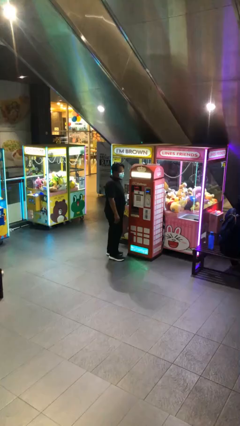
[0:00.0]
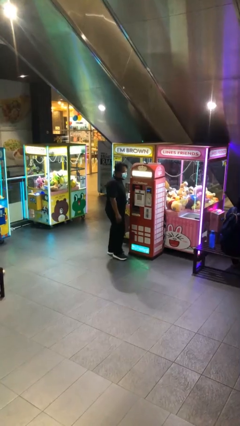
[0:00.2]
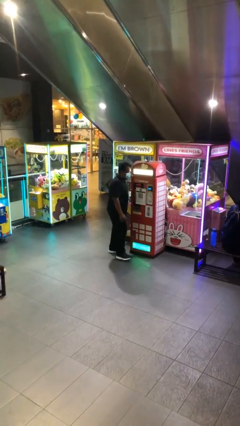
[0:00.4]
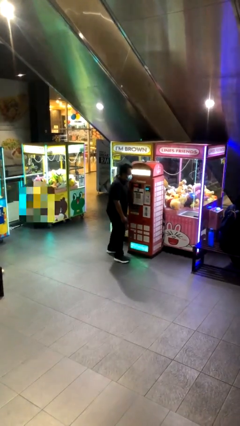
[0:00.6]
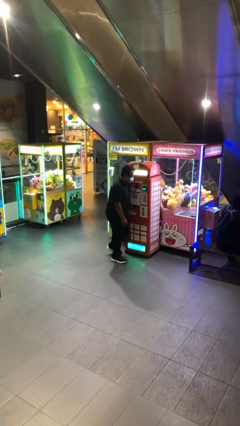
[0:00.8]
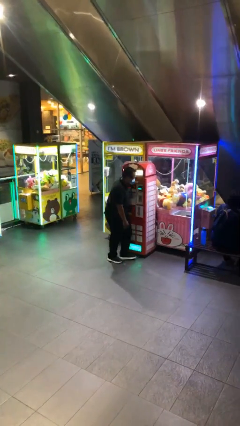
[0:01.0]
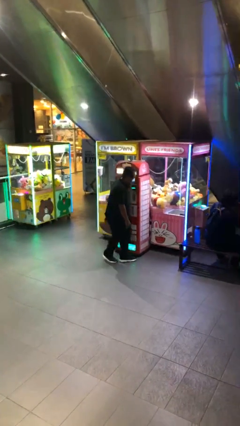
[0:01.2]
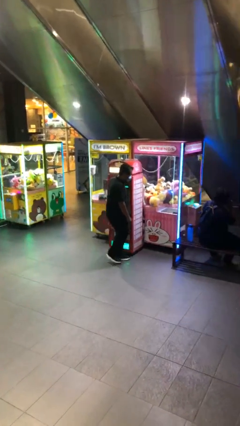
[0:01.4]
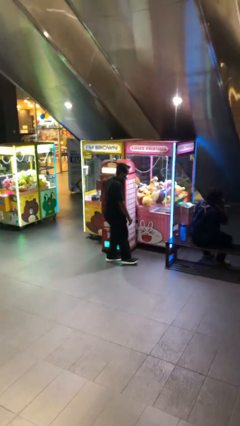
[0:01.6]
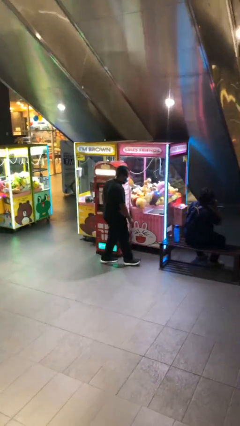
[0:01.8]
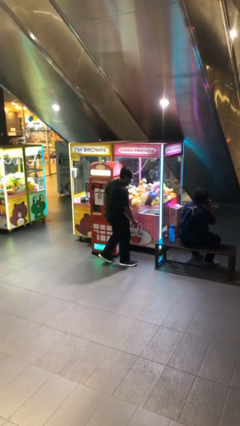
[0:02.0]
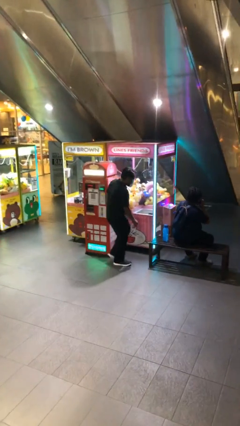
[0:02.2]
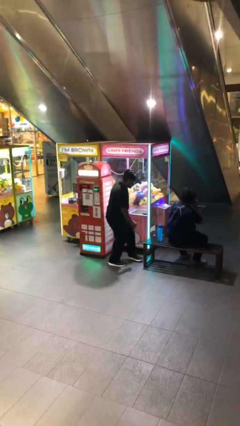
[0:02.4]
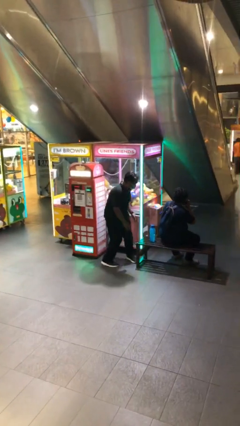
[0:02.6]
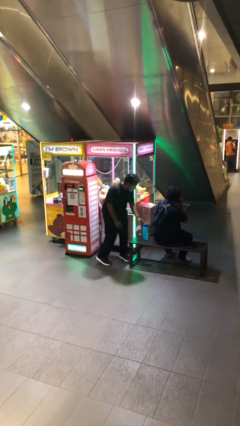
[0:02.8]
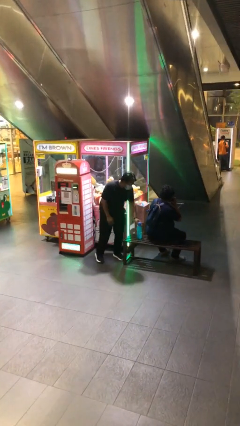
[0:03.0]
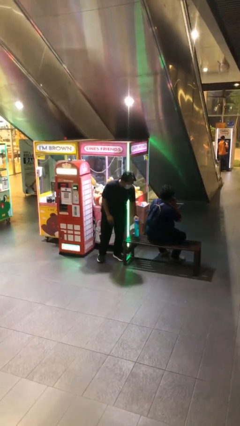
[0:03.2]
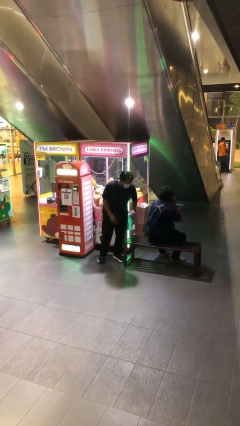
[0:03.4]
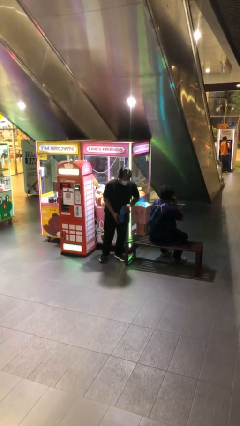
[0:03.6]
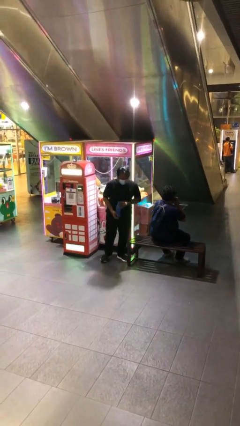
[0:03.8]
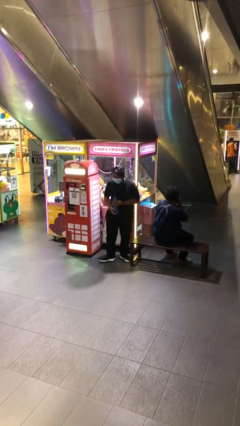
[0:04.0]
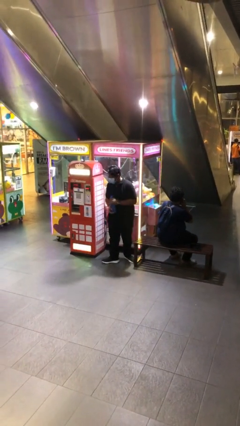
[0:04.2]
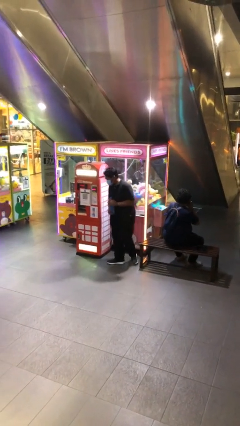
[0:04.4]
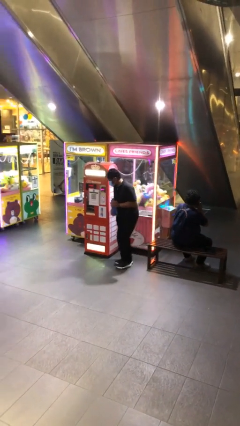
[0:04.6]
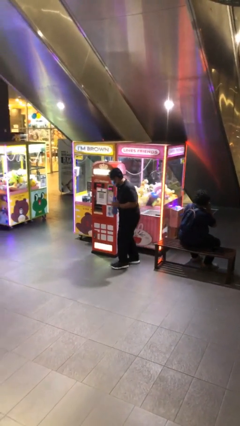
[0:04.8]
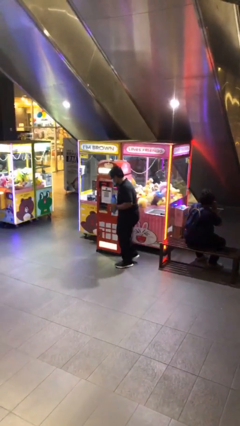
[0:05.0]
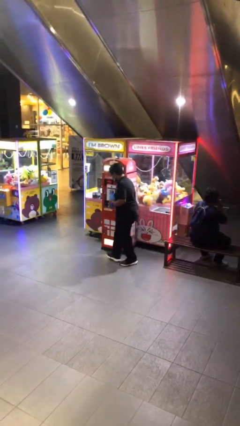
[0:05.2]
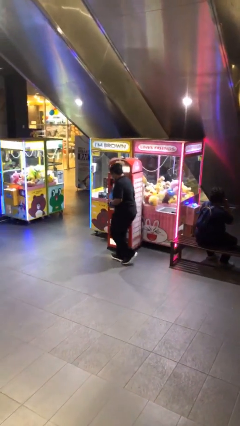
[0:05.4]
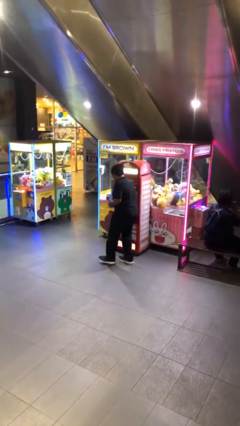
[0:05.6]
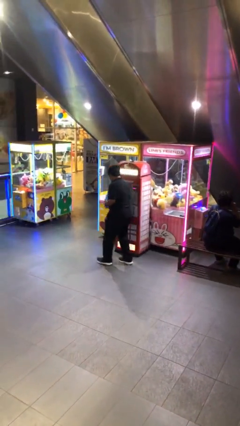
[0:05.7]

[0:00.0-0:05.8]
person steals object from person

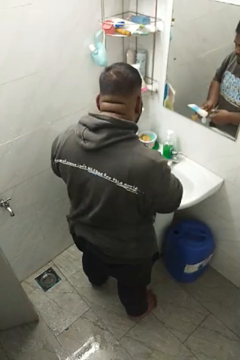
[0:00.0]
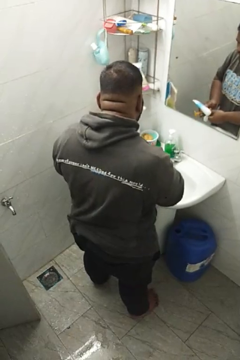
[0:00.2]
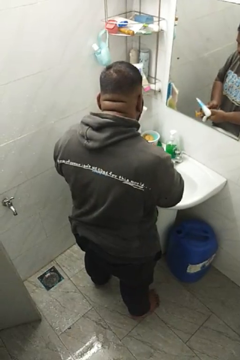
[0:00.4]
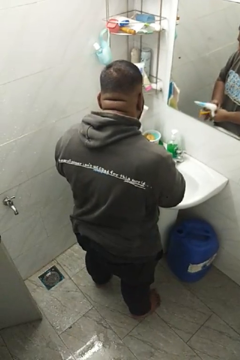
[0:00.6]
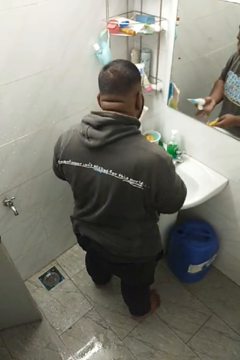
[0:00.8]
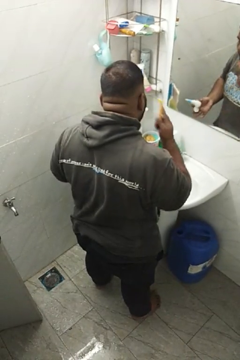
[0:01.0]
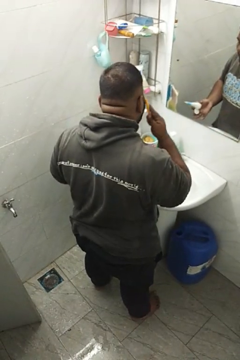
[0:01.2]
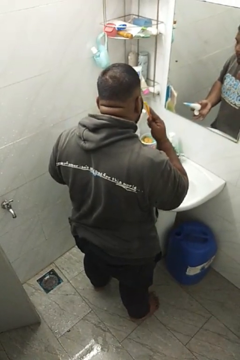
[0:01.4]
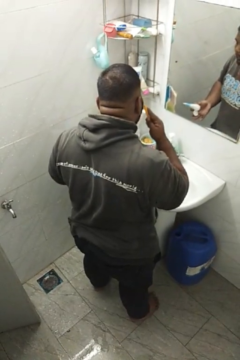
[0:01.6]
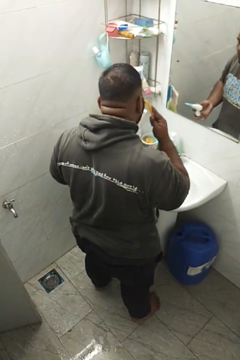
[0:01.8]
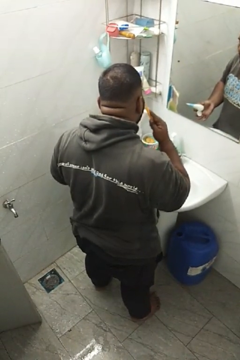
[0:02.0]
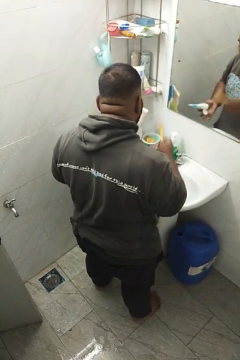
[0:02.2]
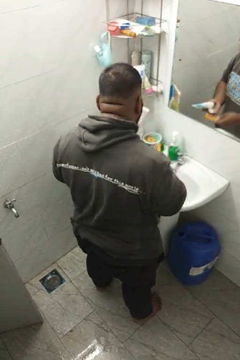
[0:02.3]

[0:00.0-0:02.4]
person shaves face

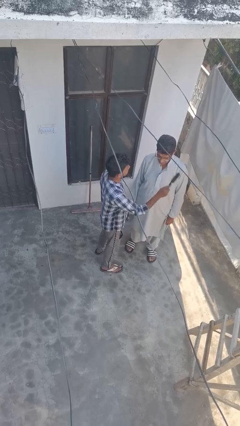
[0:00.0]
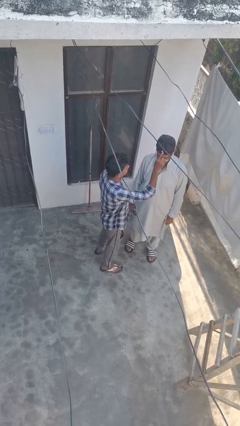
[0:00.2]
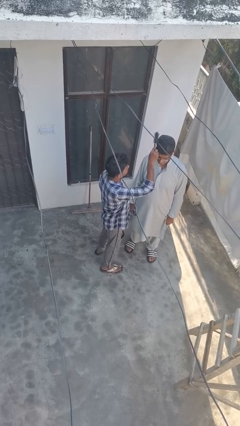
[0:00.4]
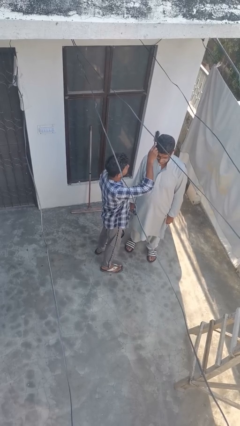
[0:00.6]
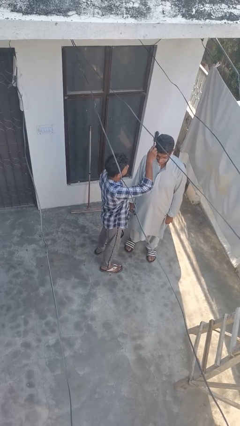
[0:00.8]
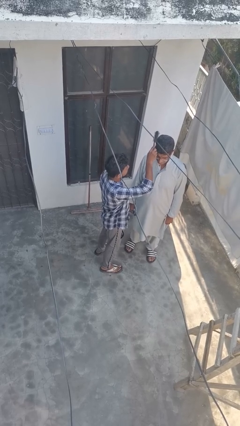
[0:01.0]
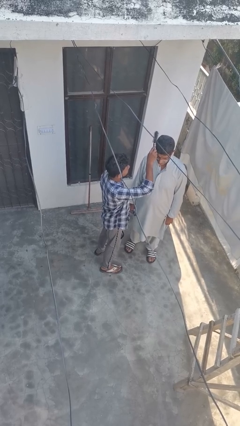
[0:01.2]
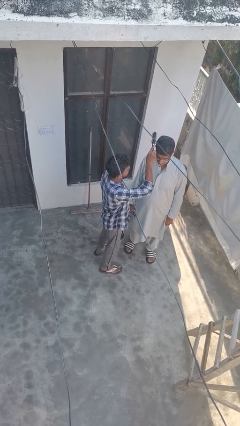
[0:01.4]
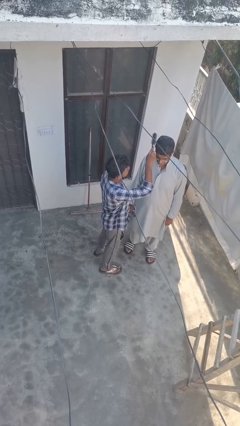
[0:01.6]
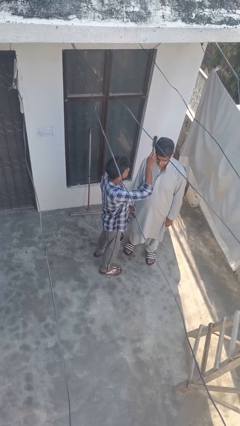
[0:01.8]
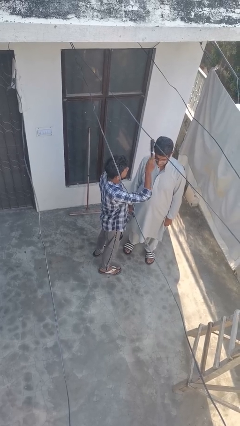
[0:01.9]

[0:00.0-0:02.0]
person brushes hair of person

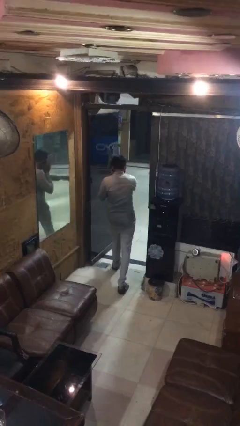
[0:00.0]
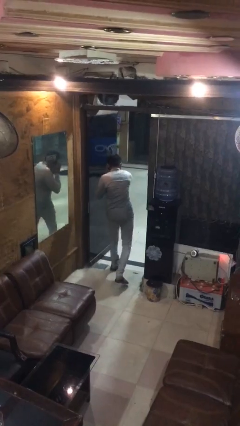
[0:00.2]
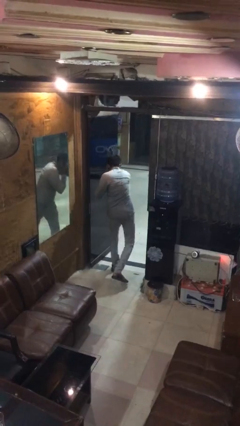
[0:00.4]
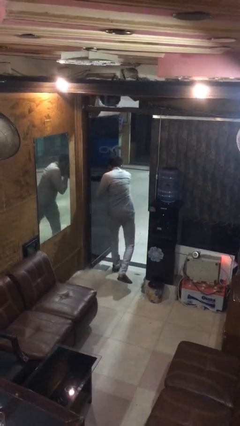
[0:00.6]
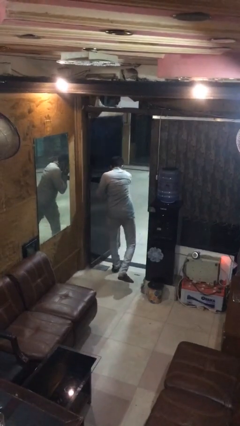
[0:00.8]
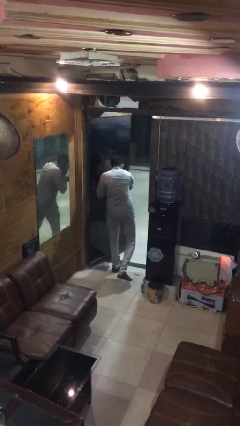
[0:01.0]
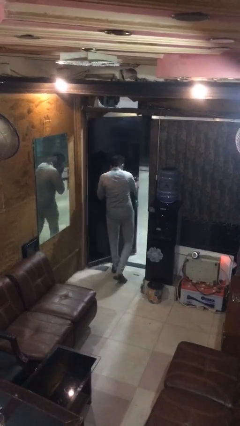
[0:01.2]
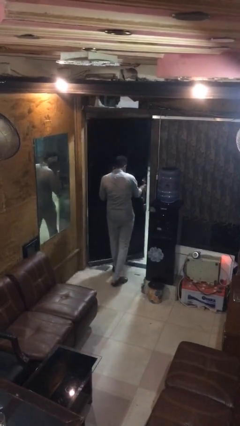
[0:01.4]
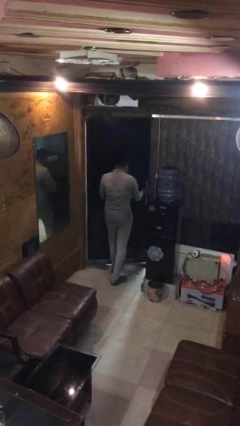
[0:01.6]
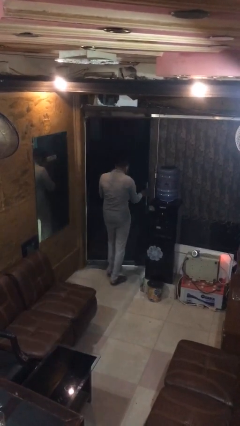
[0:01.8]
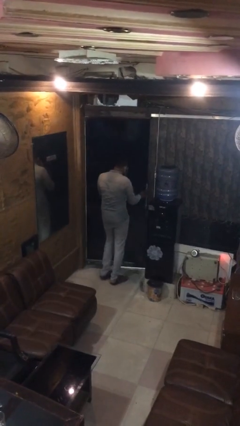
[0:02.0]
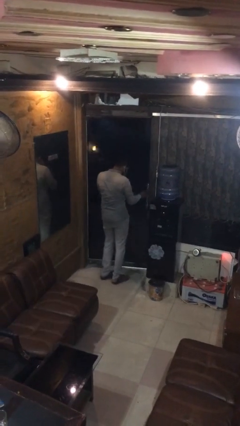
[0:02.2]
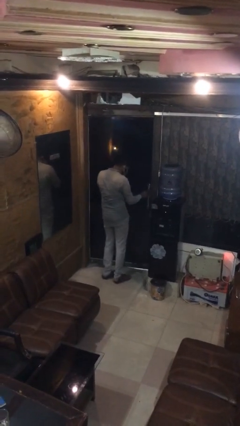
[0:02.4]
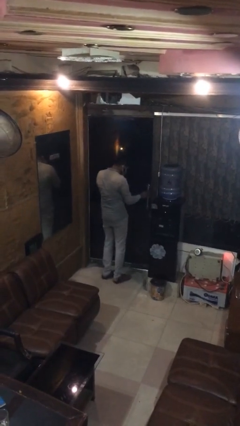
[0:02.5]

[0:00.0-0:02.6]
person closes facility door

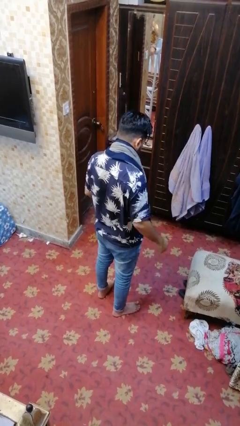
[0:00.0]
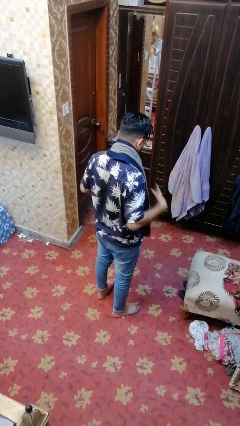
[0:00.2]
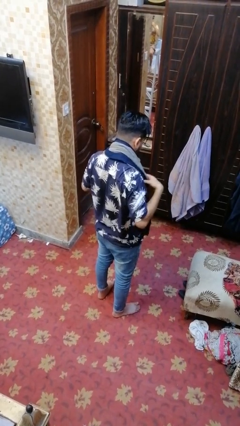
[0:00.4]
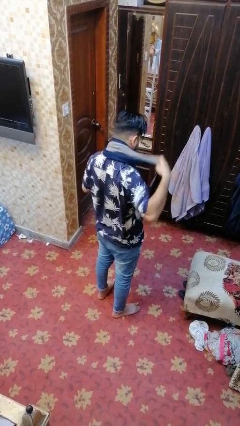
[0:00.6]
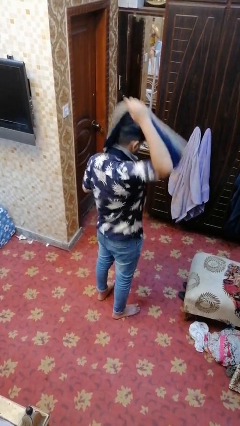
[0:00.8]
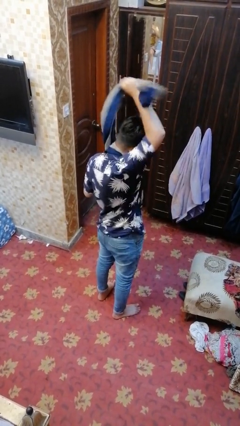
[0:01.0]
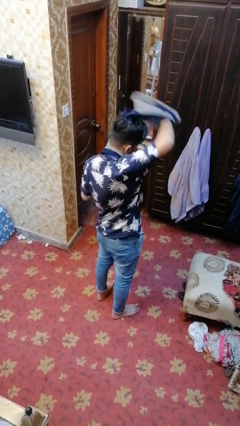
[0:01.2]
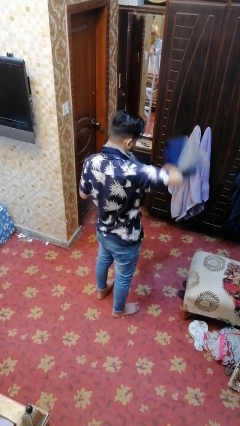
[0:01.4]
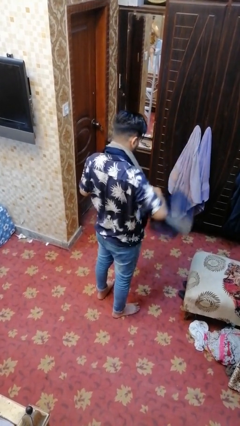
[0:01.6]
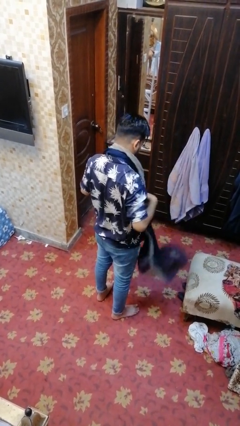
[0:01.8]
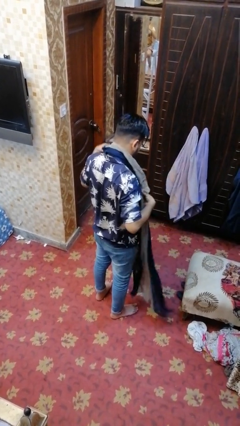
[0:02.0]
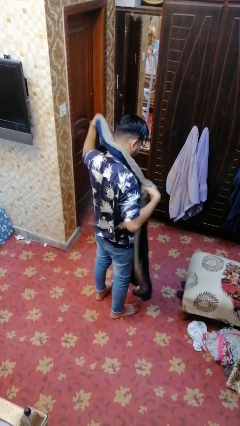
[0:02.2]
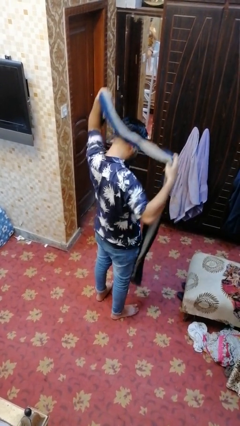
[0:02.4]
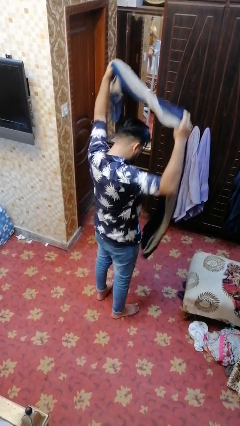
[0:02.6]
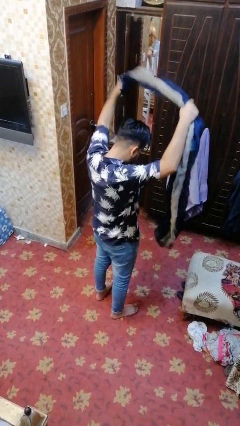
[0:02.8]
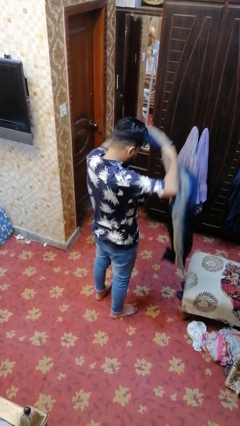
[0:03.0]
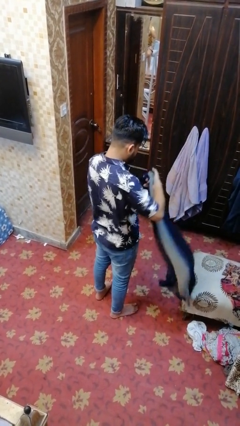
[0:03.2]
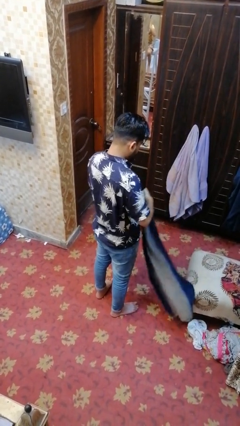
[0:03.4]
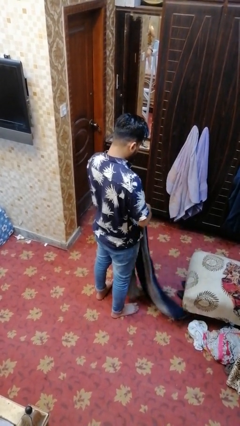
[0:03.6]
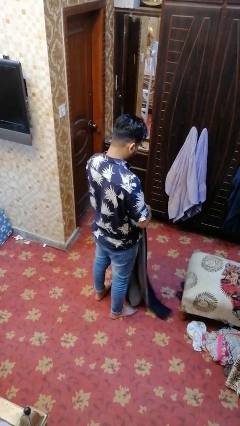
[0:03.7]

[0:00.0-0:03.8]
person takes off scarf

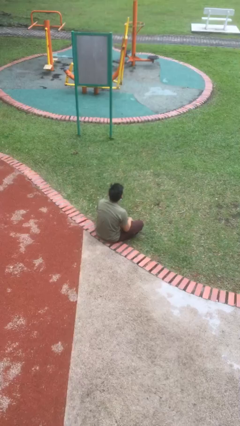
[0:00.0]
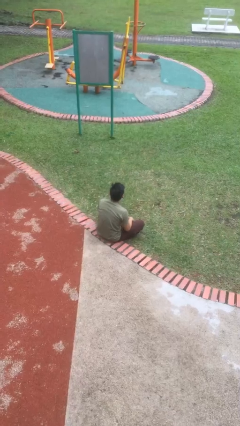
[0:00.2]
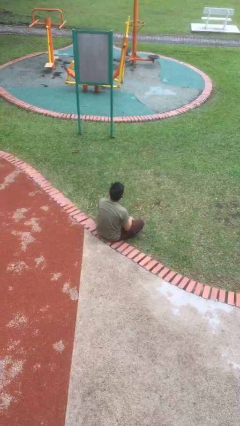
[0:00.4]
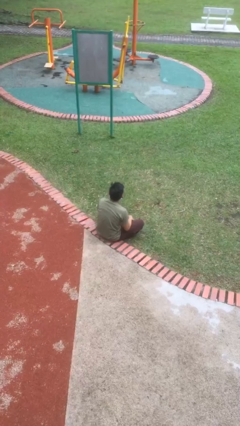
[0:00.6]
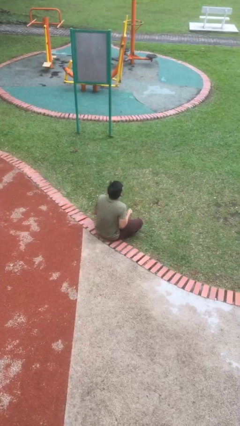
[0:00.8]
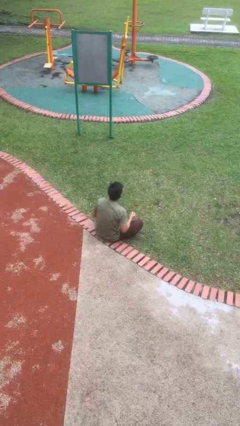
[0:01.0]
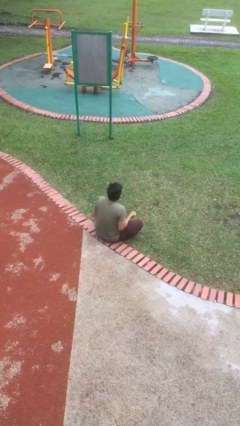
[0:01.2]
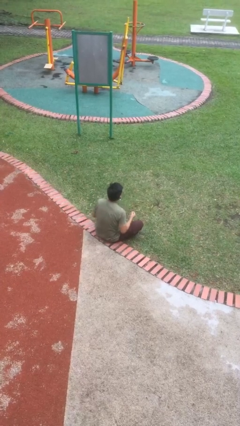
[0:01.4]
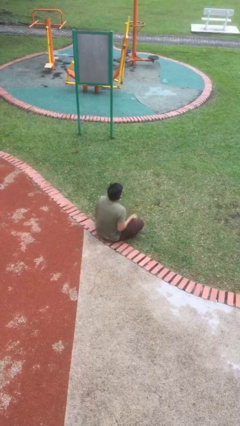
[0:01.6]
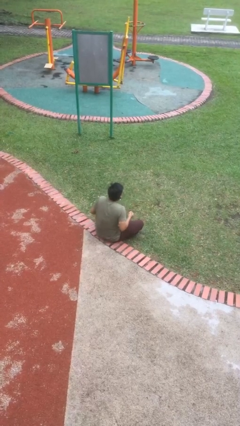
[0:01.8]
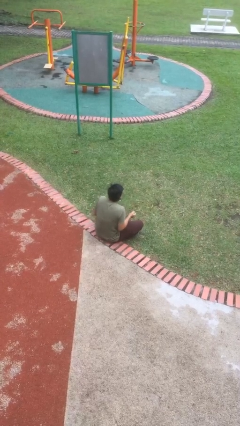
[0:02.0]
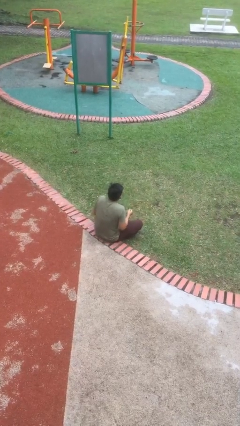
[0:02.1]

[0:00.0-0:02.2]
person shrugs
